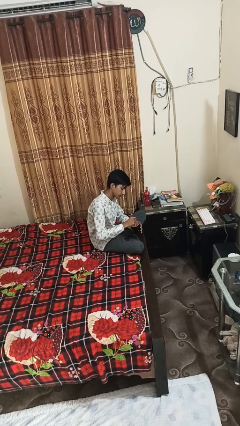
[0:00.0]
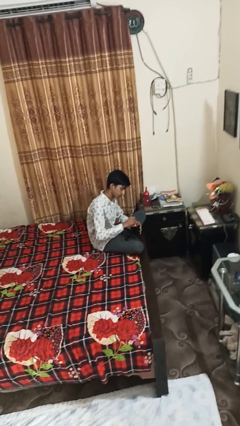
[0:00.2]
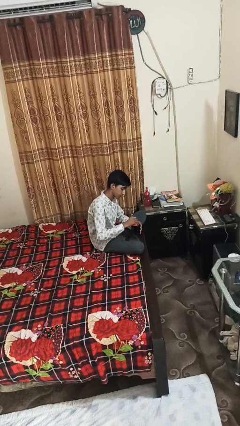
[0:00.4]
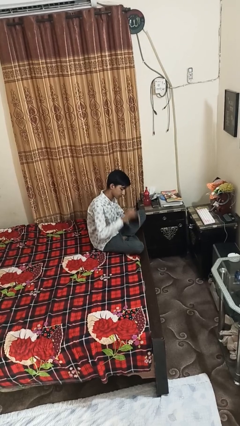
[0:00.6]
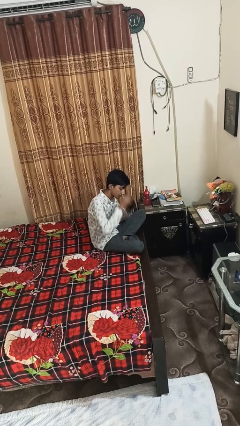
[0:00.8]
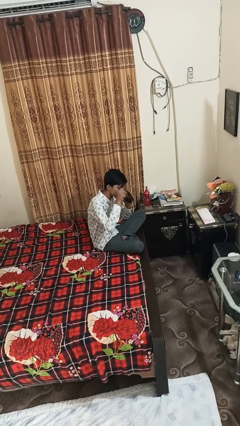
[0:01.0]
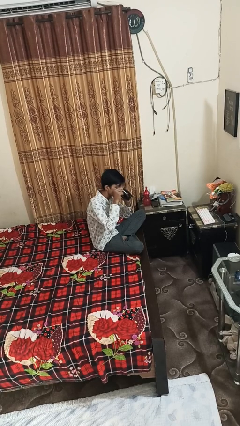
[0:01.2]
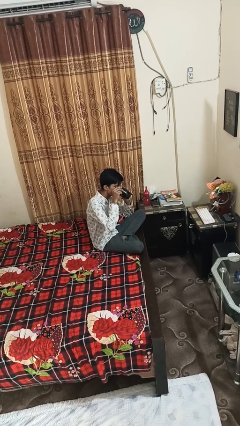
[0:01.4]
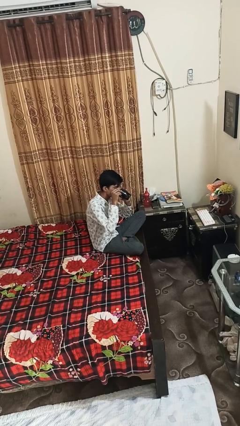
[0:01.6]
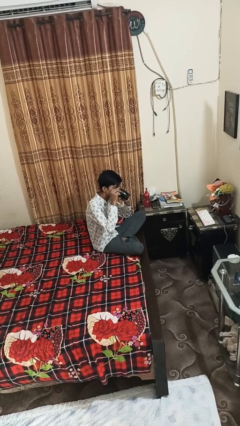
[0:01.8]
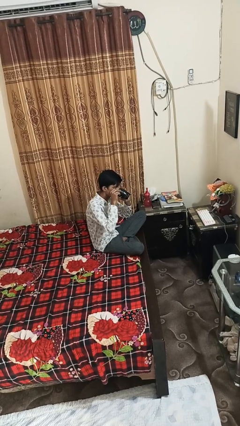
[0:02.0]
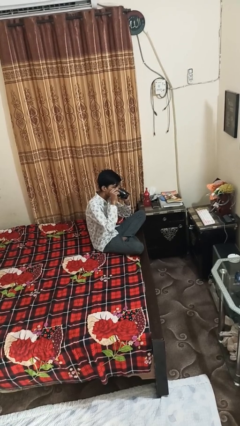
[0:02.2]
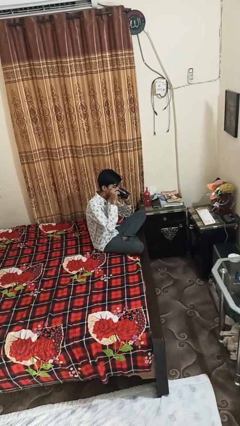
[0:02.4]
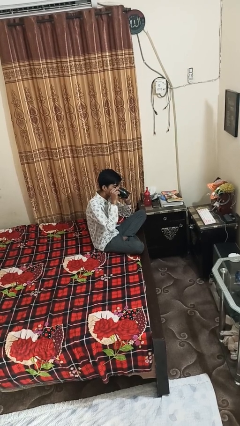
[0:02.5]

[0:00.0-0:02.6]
person drinks from mug

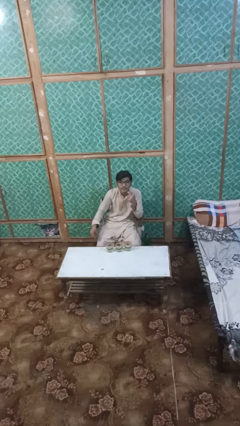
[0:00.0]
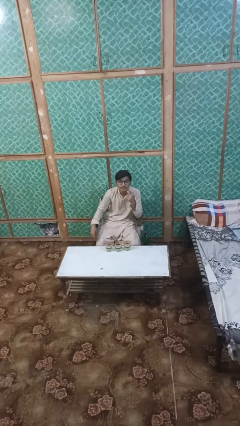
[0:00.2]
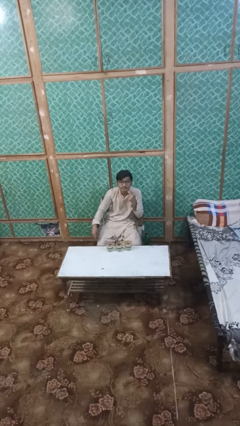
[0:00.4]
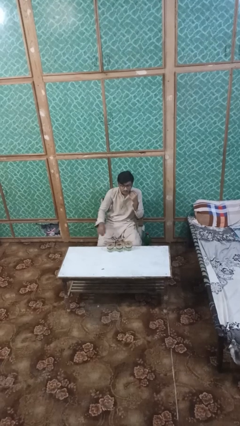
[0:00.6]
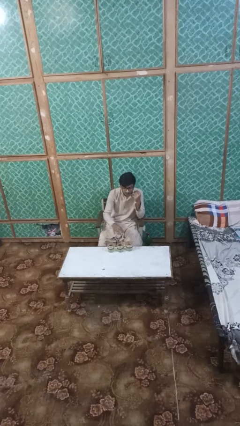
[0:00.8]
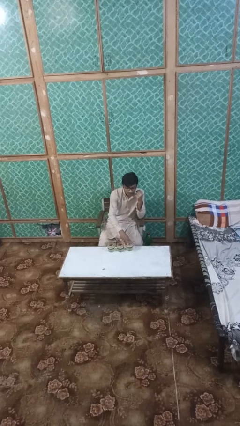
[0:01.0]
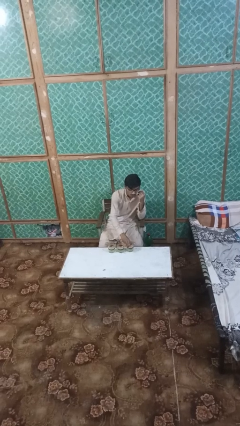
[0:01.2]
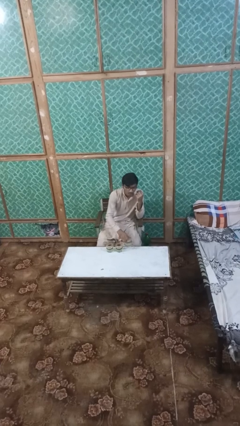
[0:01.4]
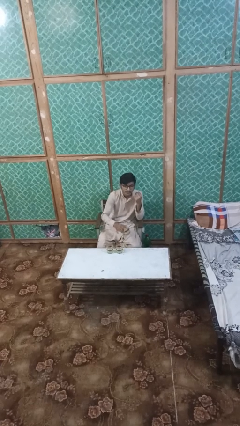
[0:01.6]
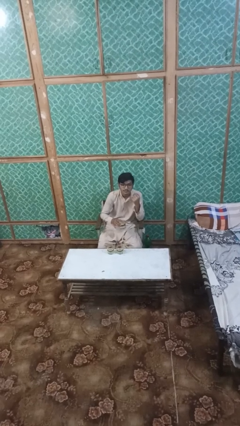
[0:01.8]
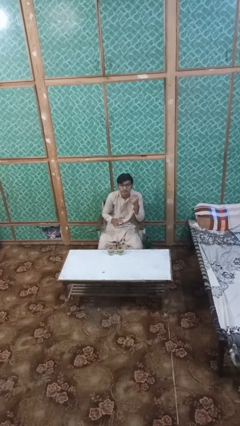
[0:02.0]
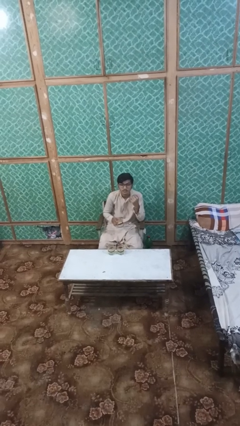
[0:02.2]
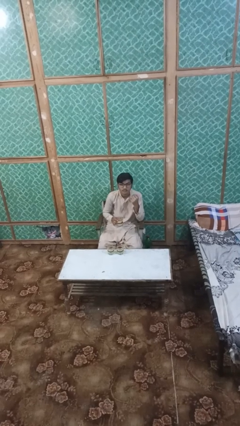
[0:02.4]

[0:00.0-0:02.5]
person picks up object from table

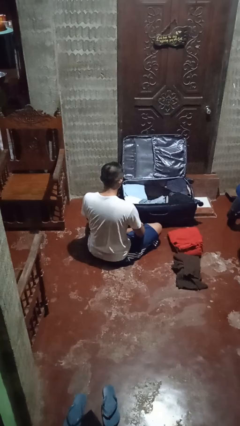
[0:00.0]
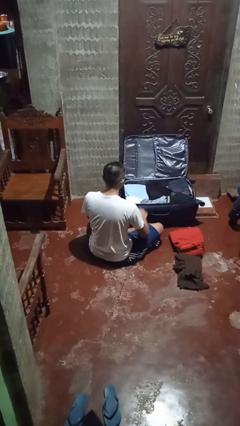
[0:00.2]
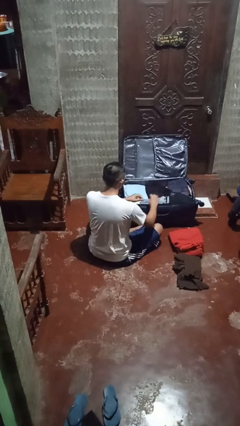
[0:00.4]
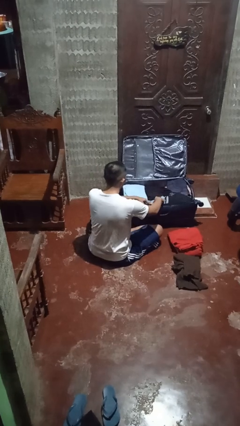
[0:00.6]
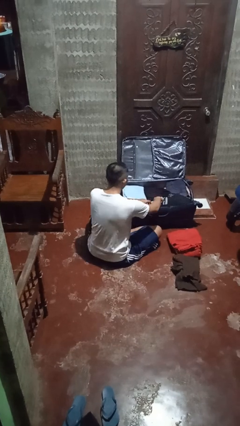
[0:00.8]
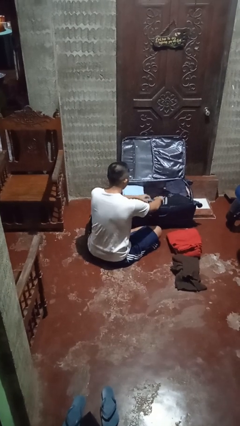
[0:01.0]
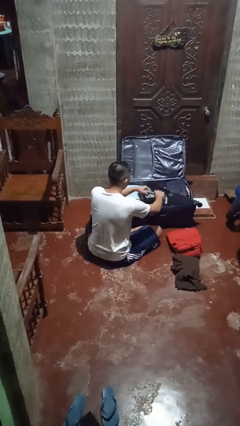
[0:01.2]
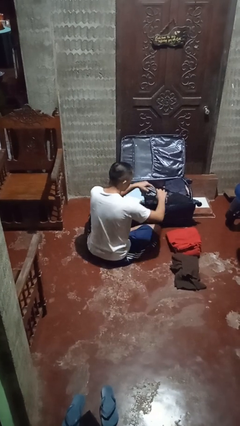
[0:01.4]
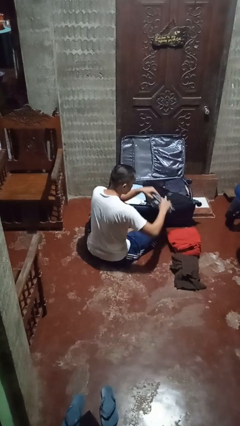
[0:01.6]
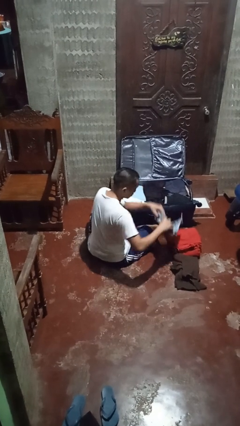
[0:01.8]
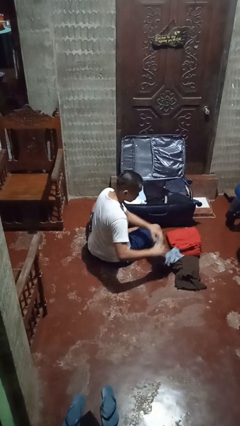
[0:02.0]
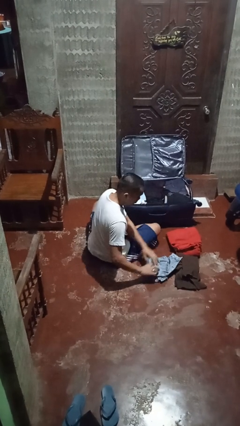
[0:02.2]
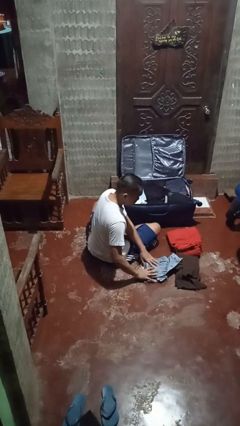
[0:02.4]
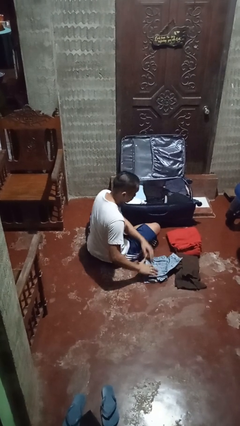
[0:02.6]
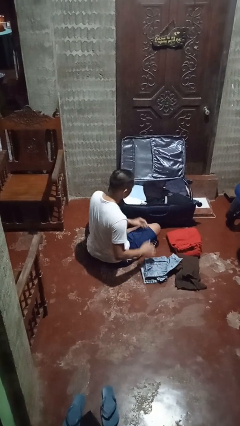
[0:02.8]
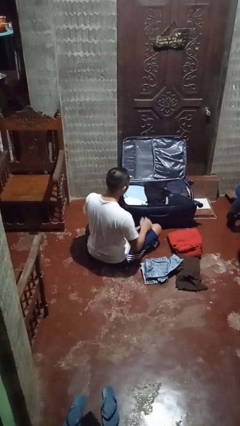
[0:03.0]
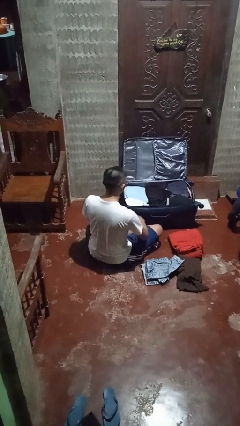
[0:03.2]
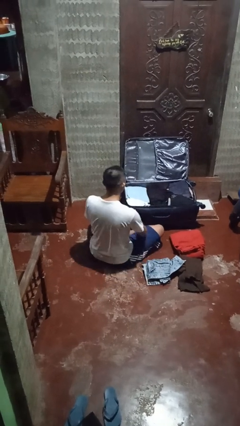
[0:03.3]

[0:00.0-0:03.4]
person unloads clothes from suitcase

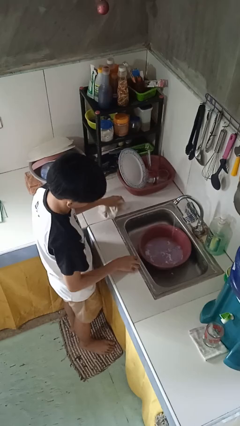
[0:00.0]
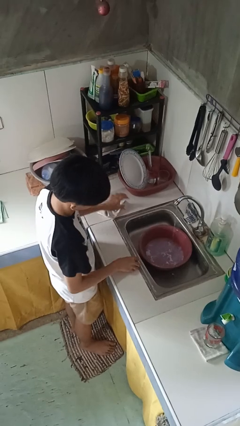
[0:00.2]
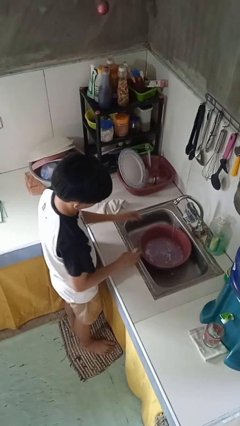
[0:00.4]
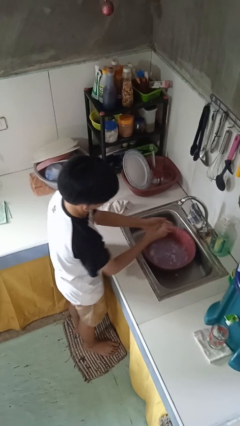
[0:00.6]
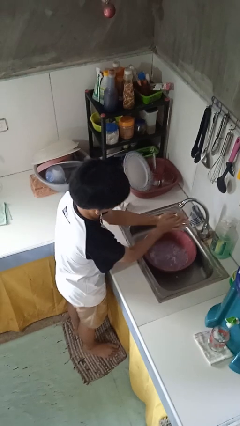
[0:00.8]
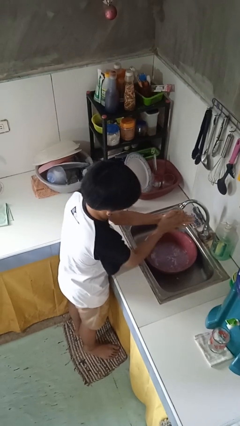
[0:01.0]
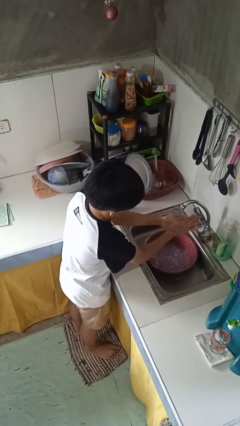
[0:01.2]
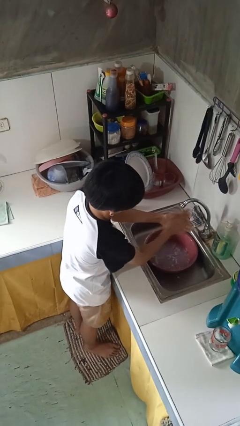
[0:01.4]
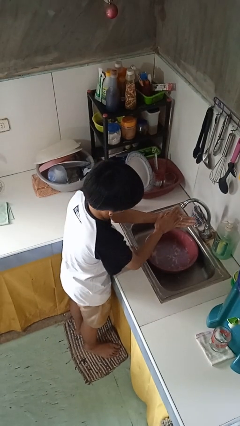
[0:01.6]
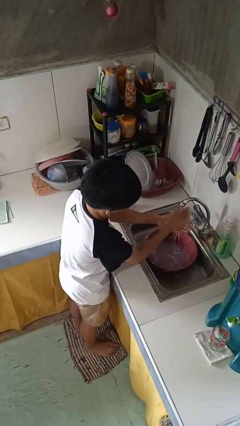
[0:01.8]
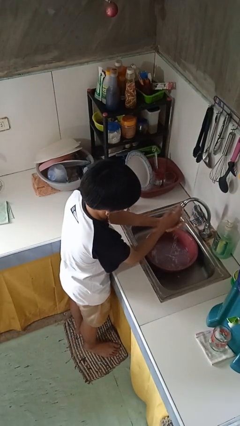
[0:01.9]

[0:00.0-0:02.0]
person washes hands

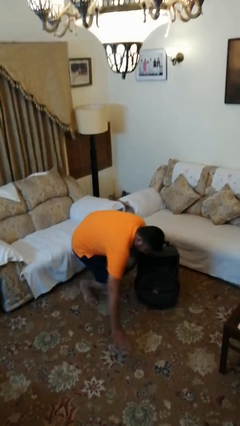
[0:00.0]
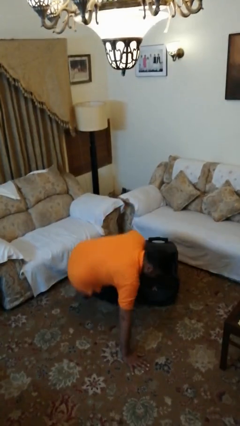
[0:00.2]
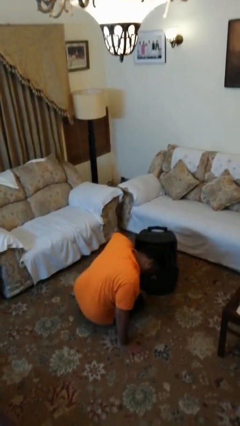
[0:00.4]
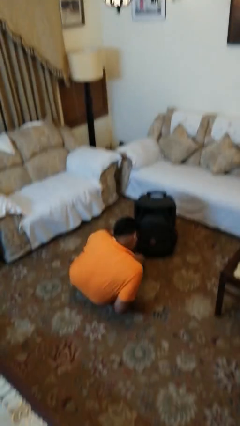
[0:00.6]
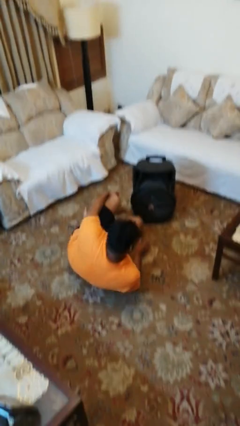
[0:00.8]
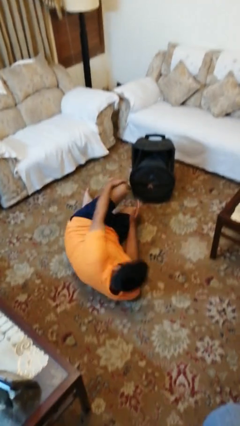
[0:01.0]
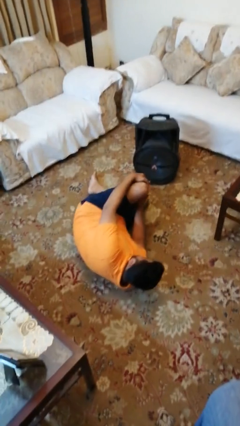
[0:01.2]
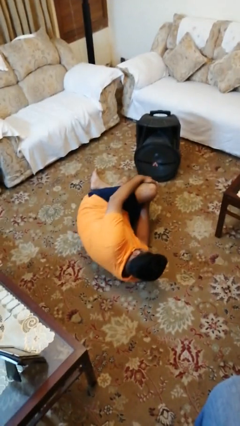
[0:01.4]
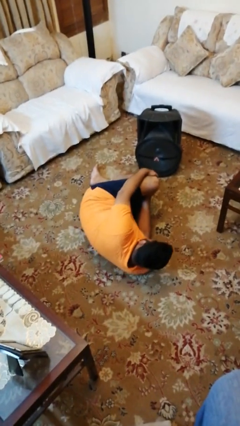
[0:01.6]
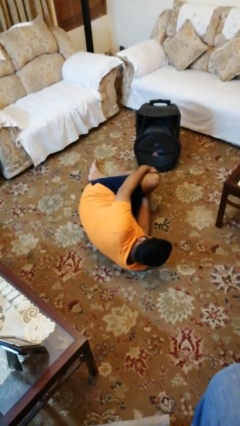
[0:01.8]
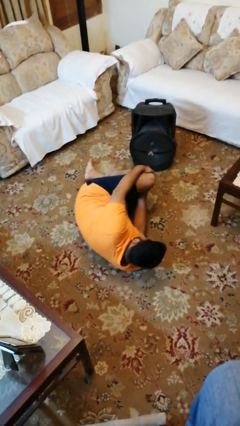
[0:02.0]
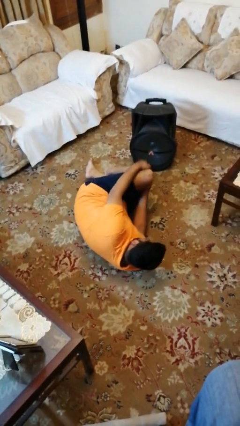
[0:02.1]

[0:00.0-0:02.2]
person lies down on floor

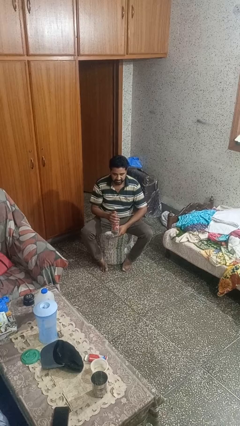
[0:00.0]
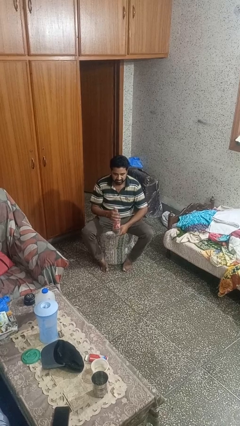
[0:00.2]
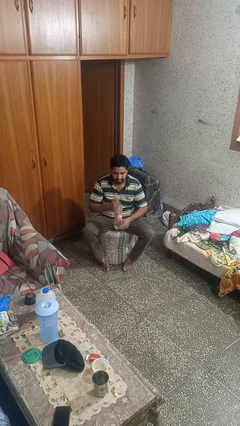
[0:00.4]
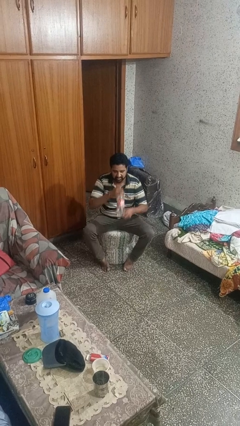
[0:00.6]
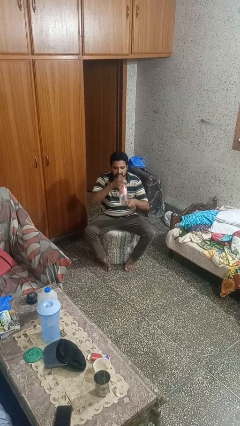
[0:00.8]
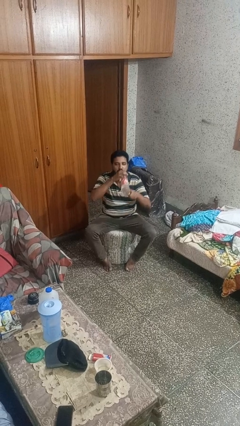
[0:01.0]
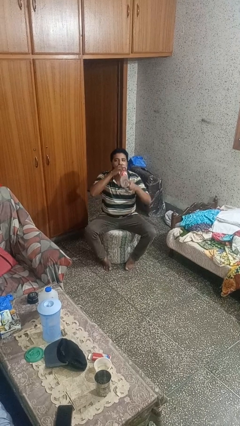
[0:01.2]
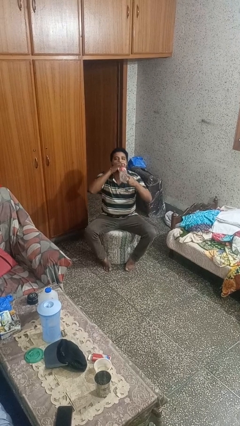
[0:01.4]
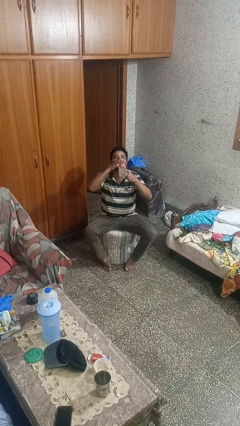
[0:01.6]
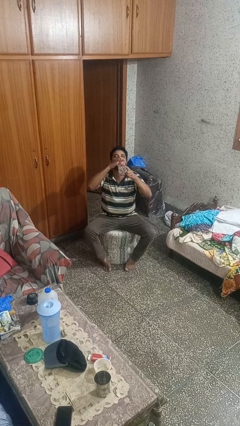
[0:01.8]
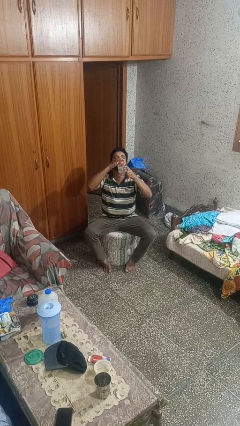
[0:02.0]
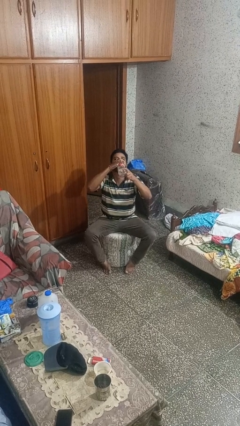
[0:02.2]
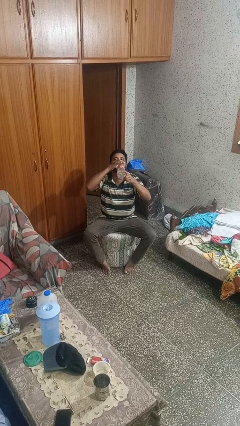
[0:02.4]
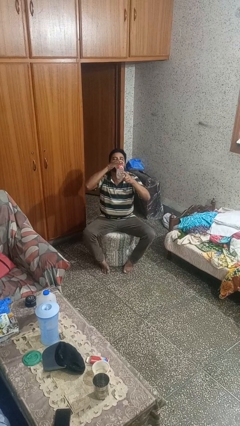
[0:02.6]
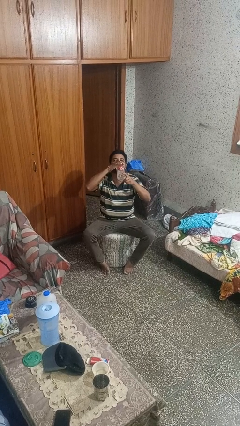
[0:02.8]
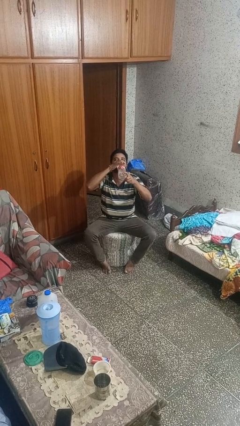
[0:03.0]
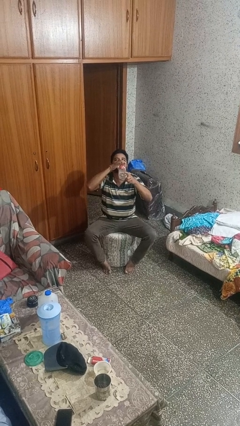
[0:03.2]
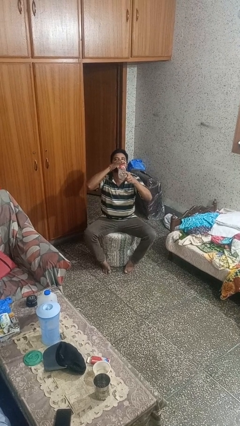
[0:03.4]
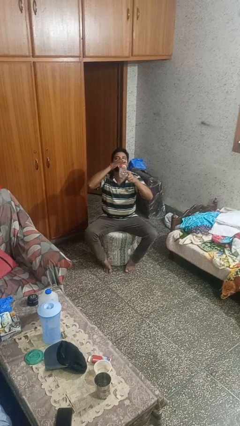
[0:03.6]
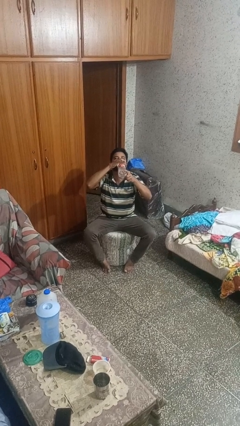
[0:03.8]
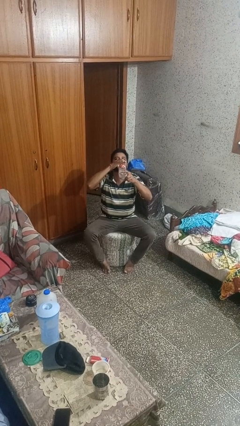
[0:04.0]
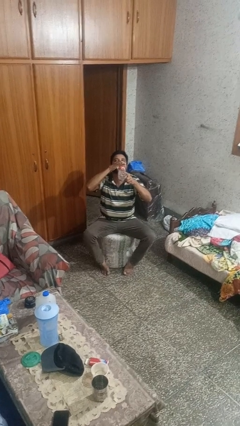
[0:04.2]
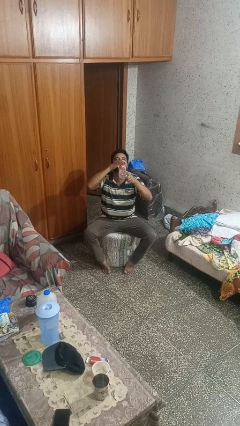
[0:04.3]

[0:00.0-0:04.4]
person drinks from bottle

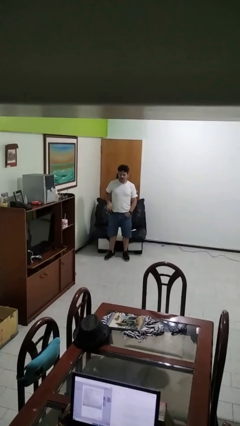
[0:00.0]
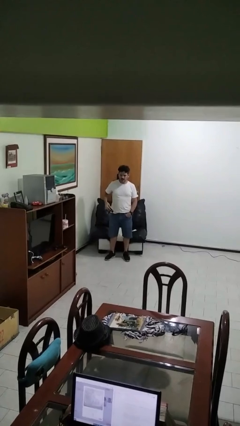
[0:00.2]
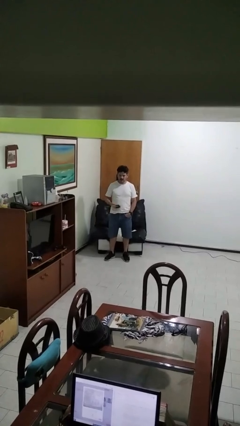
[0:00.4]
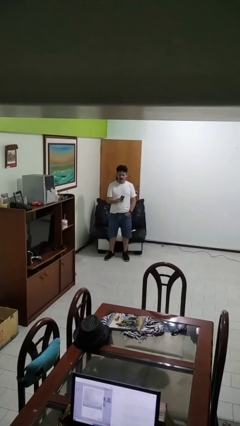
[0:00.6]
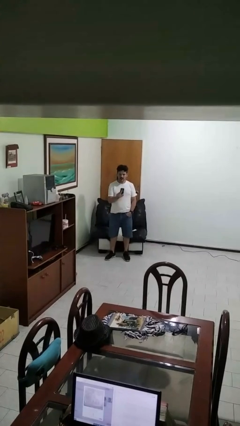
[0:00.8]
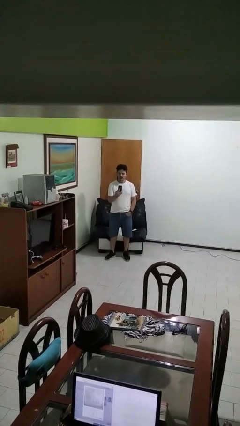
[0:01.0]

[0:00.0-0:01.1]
person takes phone from pocket
